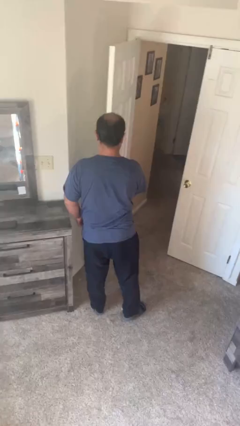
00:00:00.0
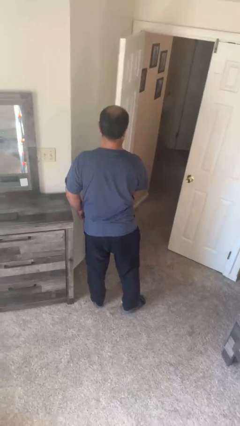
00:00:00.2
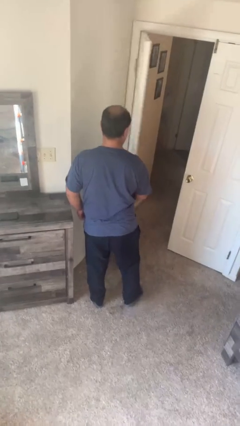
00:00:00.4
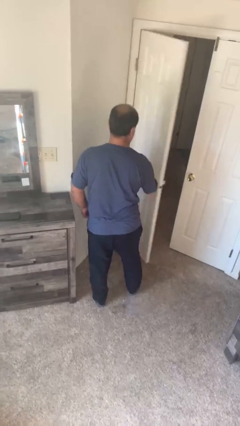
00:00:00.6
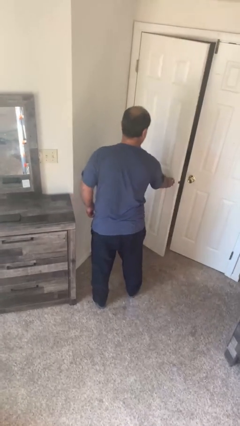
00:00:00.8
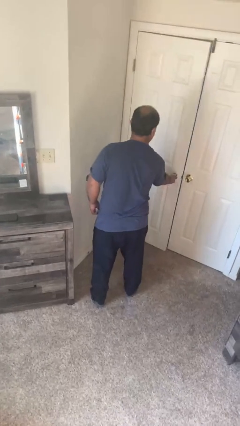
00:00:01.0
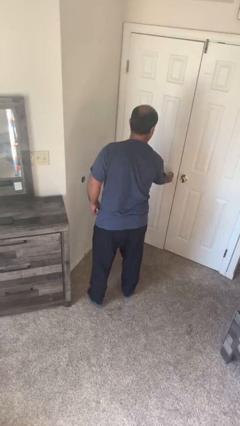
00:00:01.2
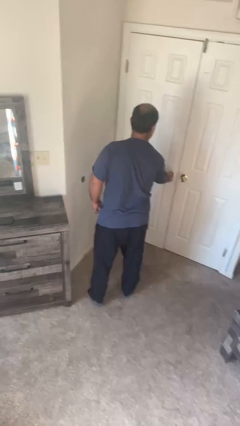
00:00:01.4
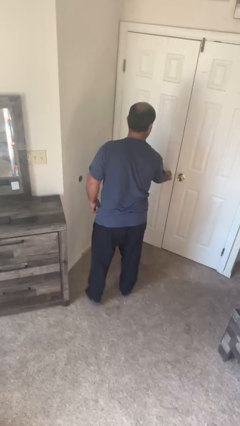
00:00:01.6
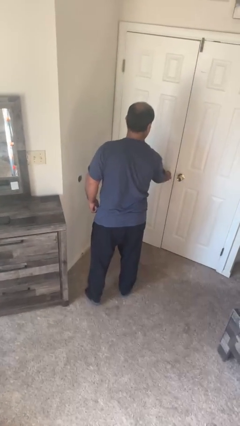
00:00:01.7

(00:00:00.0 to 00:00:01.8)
person closes facility door

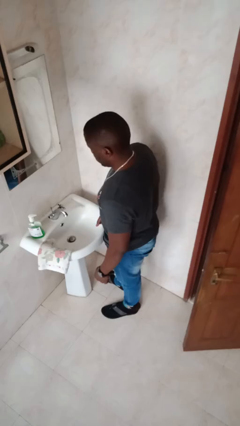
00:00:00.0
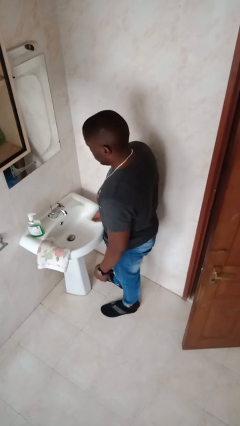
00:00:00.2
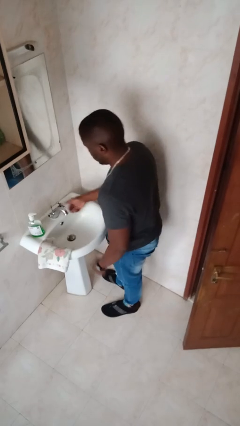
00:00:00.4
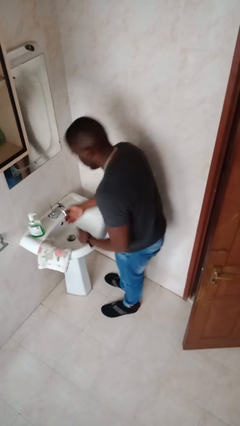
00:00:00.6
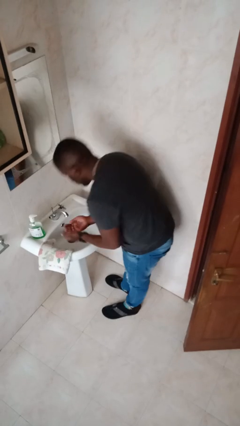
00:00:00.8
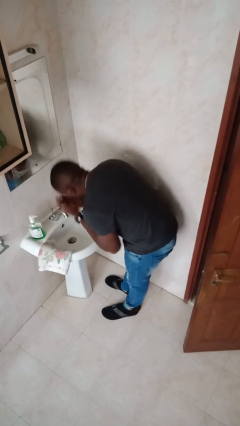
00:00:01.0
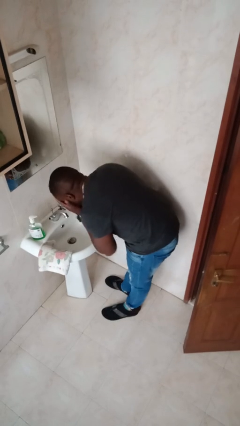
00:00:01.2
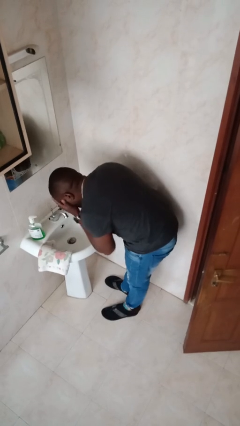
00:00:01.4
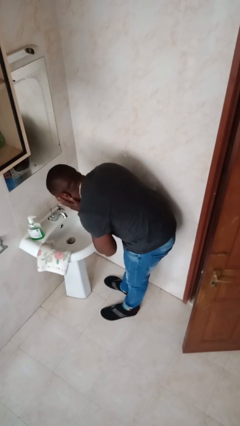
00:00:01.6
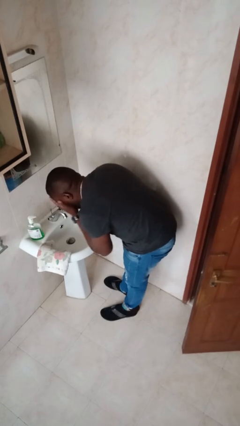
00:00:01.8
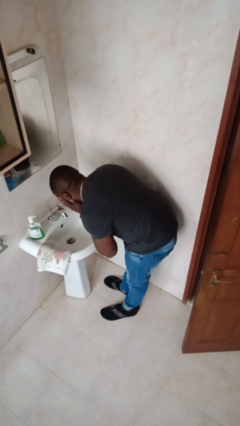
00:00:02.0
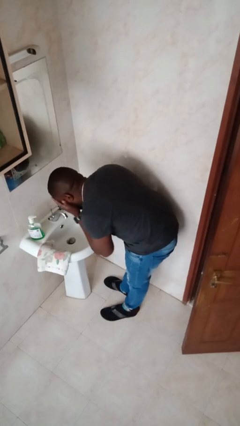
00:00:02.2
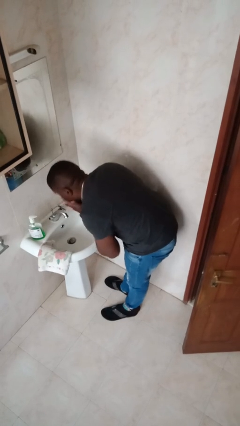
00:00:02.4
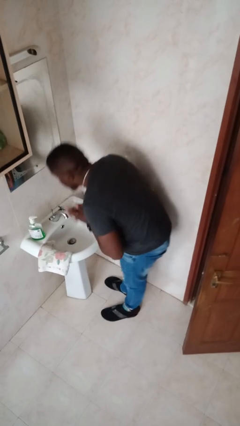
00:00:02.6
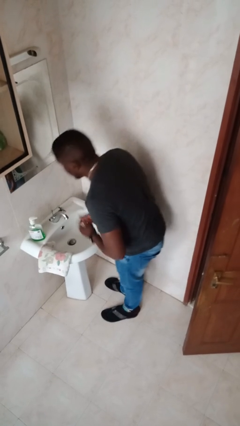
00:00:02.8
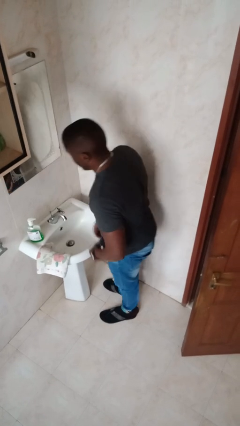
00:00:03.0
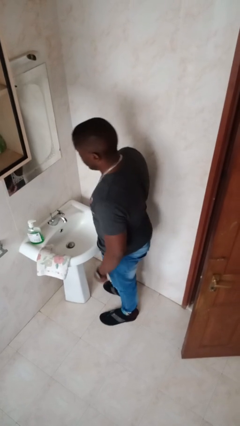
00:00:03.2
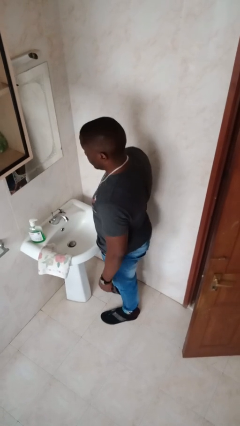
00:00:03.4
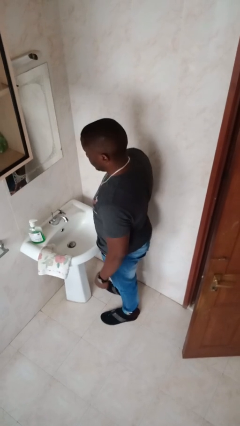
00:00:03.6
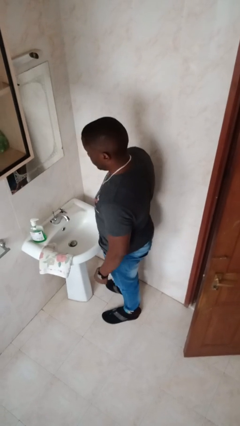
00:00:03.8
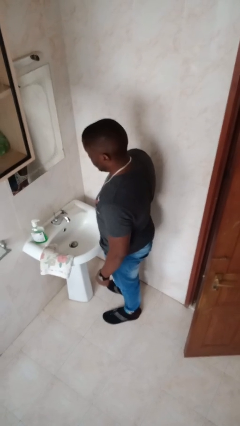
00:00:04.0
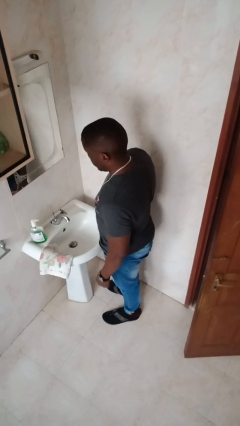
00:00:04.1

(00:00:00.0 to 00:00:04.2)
person washes face

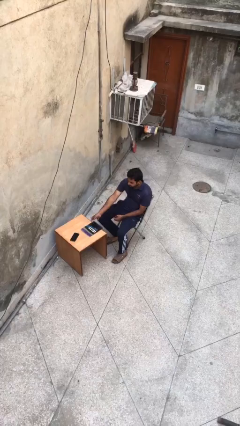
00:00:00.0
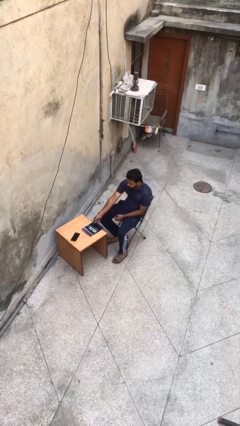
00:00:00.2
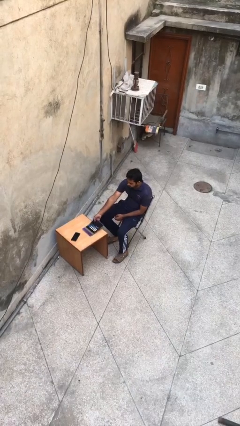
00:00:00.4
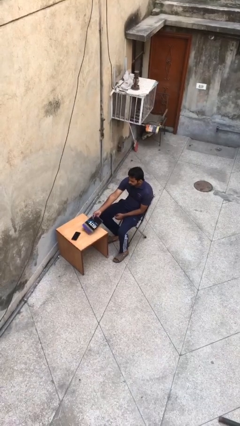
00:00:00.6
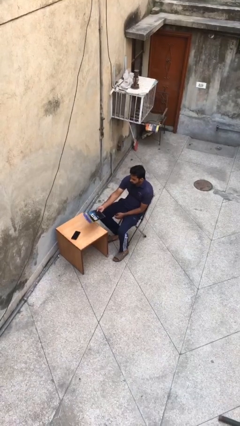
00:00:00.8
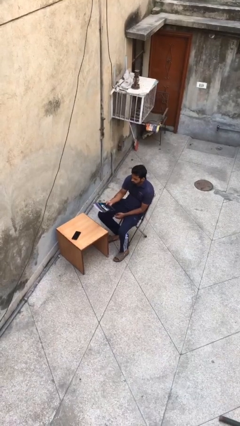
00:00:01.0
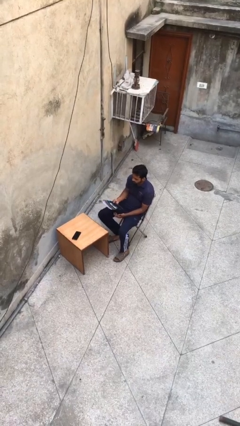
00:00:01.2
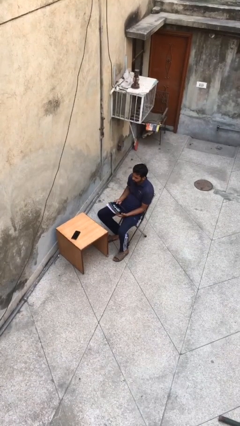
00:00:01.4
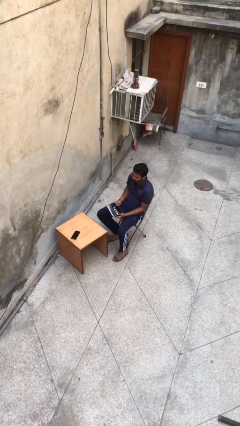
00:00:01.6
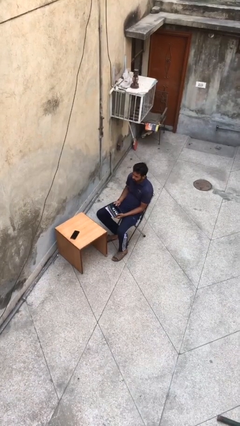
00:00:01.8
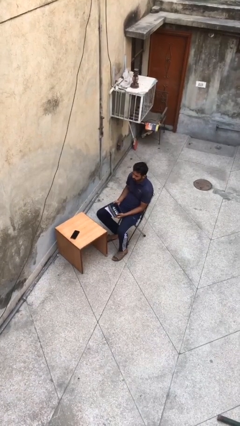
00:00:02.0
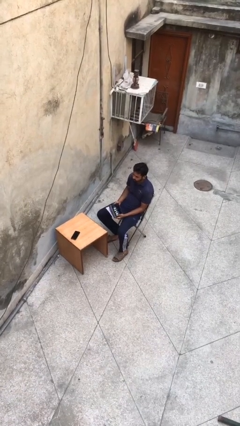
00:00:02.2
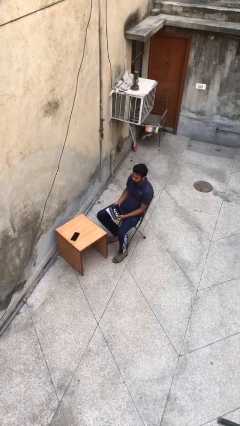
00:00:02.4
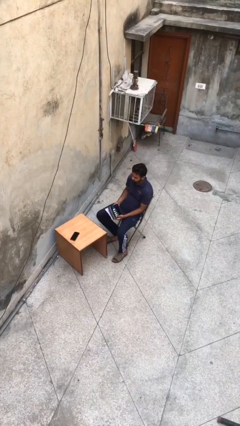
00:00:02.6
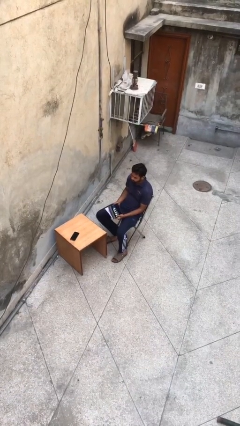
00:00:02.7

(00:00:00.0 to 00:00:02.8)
person picks up object from table

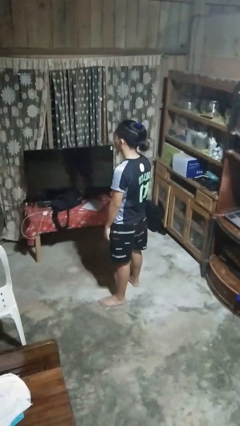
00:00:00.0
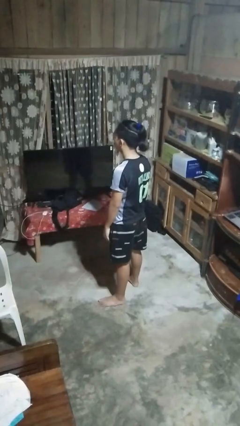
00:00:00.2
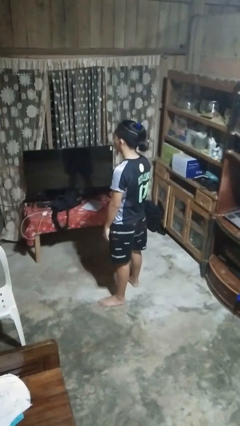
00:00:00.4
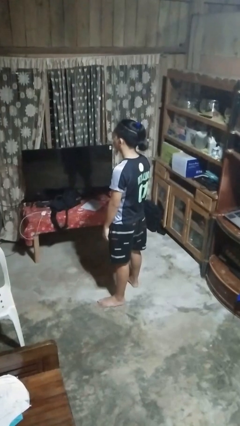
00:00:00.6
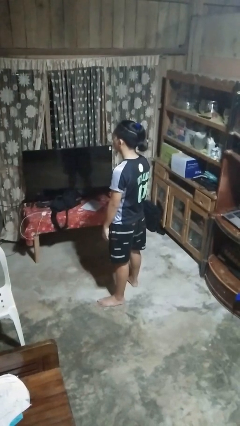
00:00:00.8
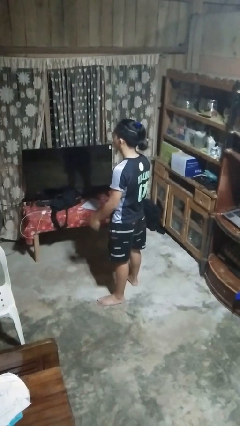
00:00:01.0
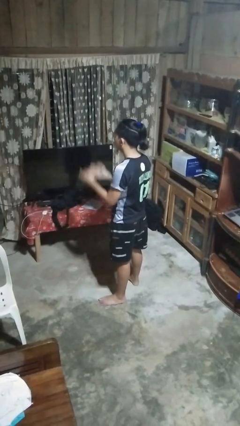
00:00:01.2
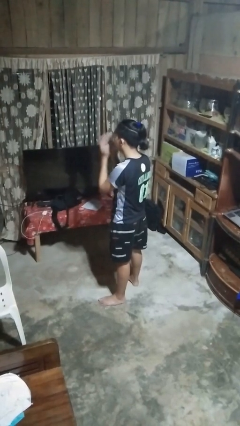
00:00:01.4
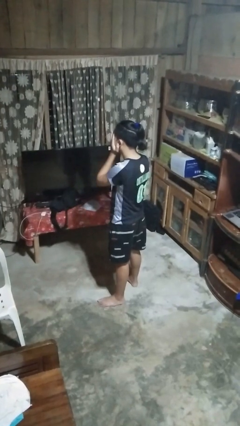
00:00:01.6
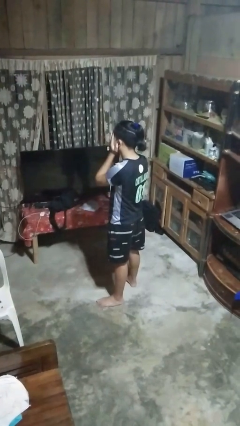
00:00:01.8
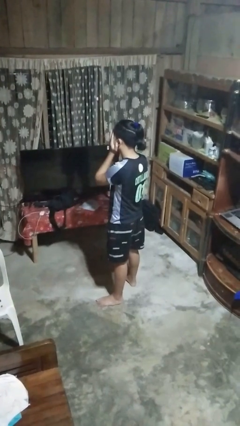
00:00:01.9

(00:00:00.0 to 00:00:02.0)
person covers face with hands

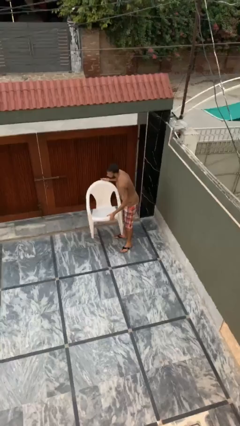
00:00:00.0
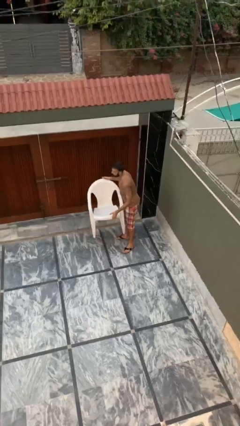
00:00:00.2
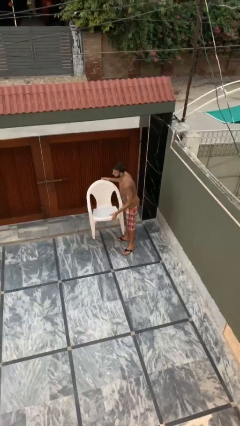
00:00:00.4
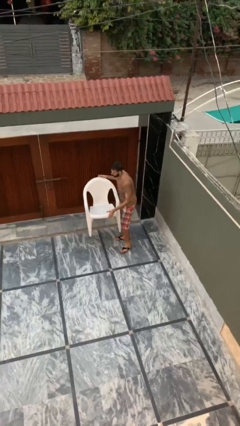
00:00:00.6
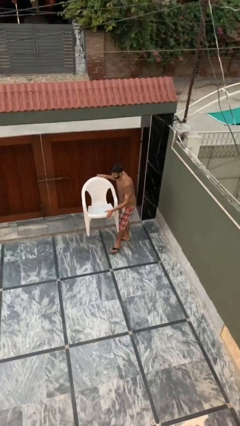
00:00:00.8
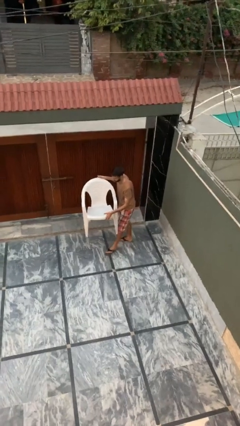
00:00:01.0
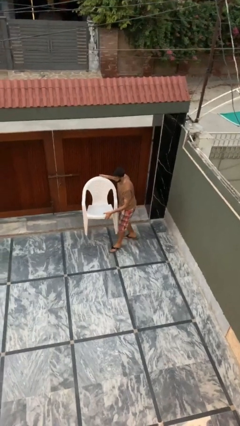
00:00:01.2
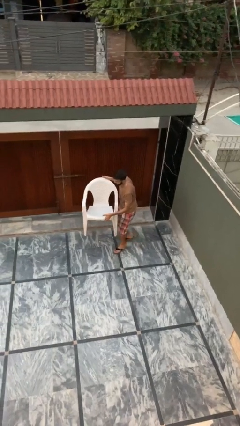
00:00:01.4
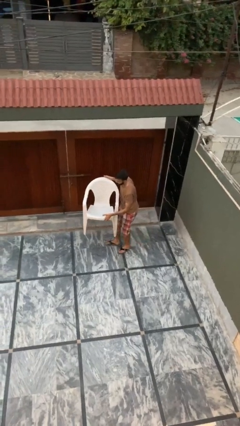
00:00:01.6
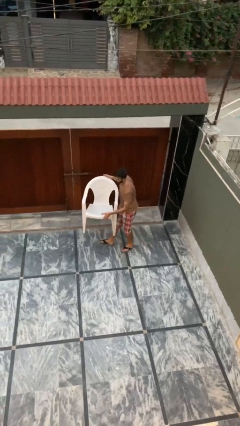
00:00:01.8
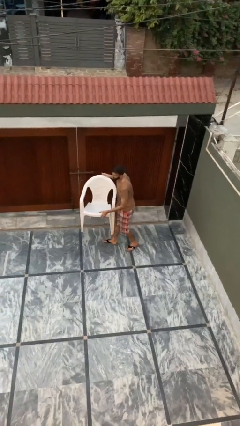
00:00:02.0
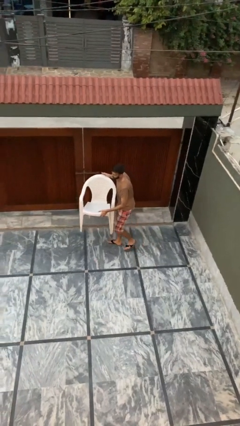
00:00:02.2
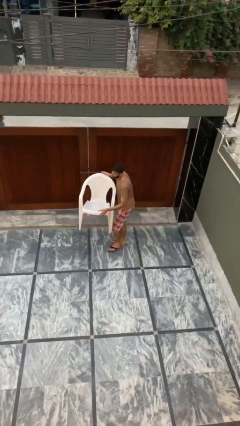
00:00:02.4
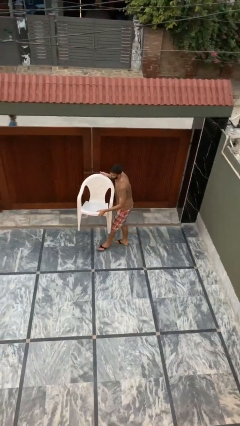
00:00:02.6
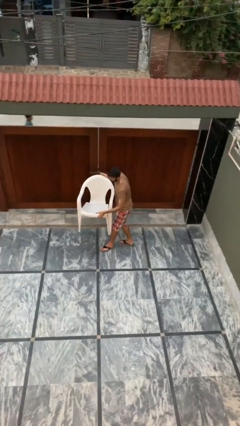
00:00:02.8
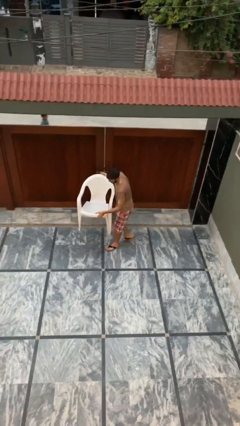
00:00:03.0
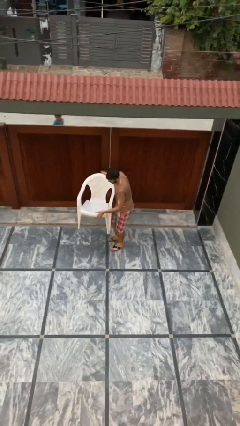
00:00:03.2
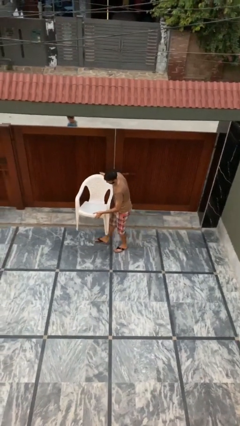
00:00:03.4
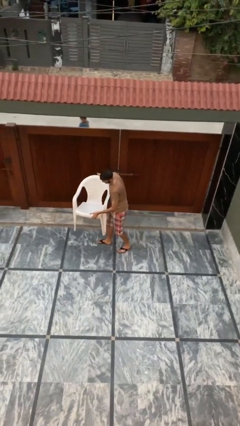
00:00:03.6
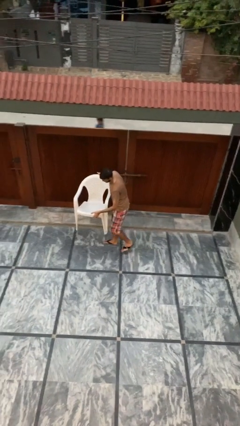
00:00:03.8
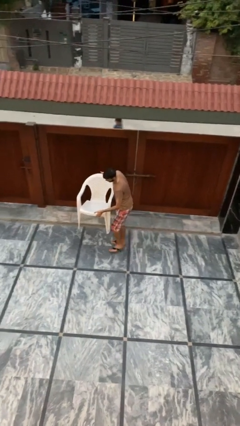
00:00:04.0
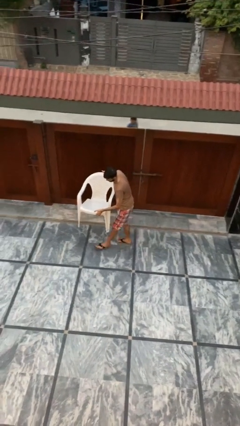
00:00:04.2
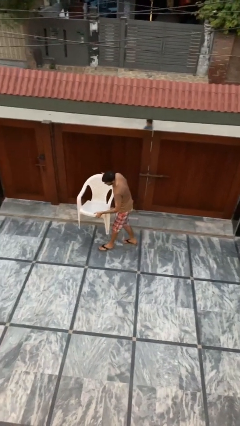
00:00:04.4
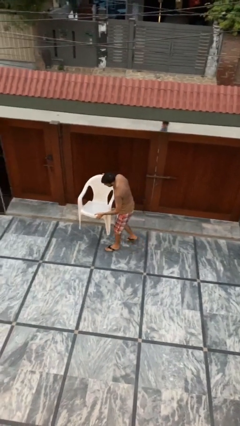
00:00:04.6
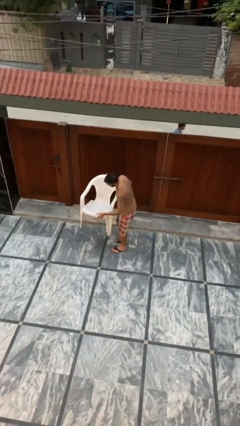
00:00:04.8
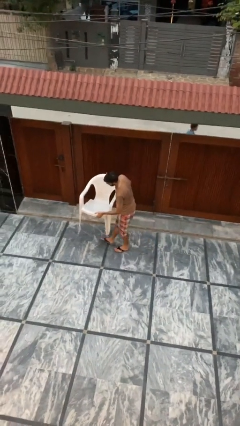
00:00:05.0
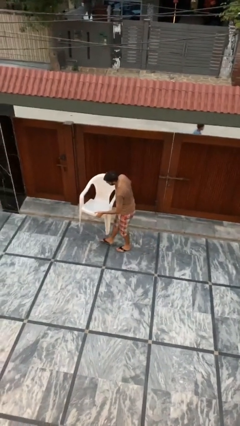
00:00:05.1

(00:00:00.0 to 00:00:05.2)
person carries heavy object

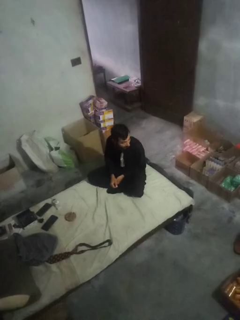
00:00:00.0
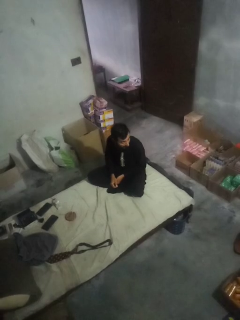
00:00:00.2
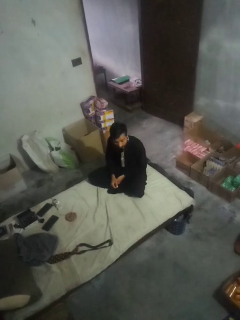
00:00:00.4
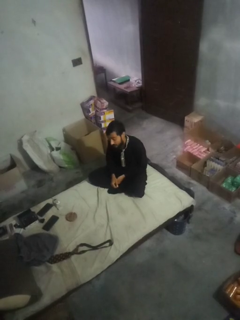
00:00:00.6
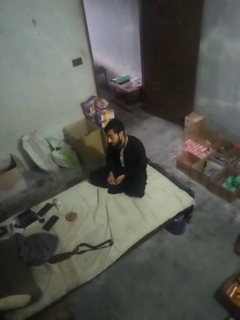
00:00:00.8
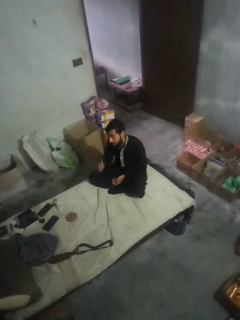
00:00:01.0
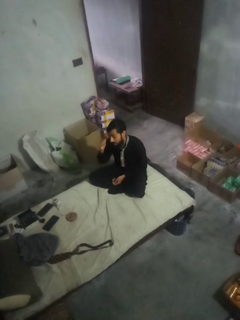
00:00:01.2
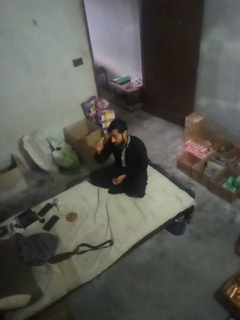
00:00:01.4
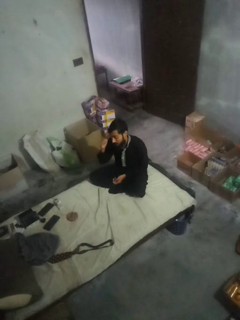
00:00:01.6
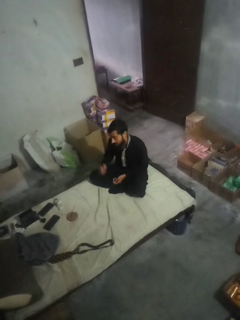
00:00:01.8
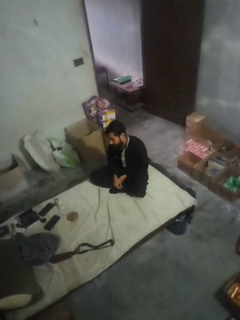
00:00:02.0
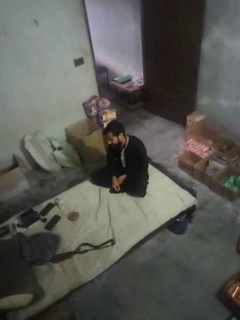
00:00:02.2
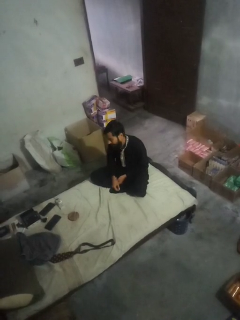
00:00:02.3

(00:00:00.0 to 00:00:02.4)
person gestures behind me
